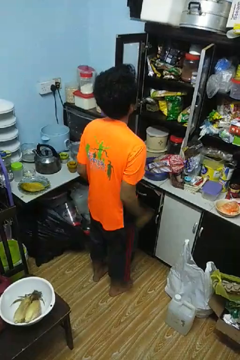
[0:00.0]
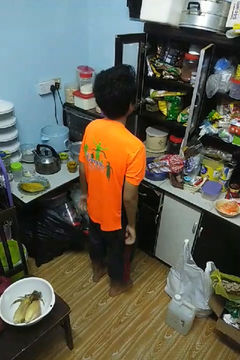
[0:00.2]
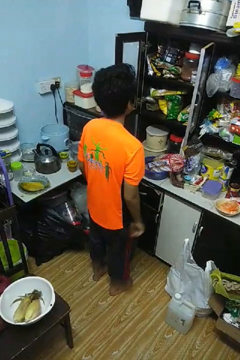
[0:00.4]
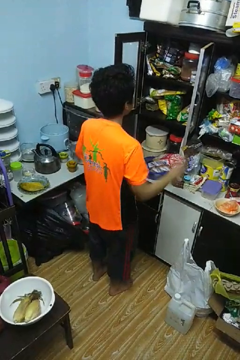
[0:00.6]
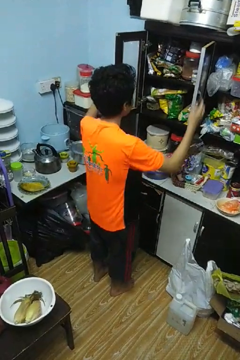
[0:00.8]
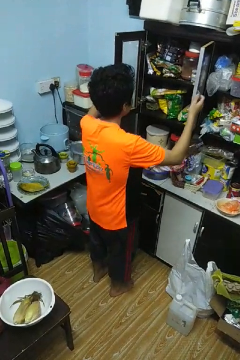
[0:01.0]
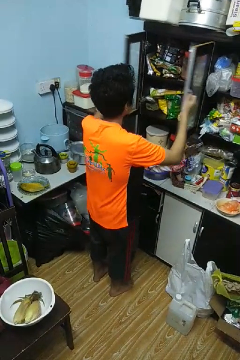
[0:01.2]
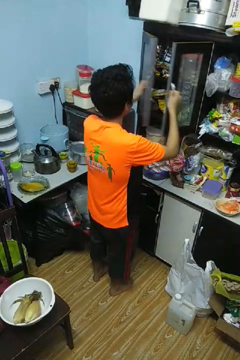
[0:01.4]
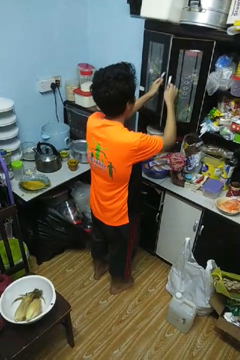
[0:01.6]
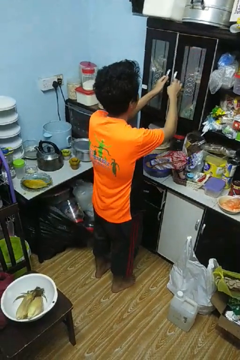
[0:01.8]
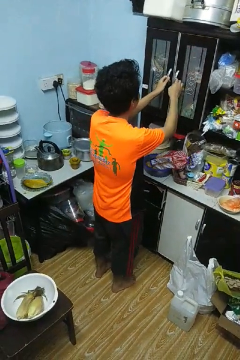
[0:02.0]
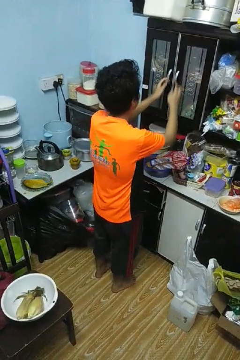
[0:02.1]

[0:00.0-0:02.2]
person closes cabinet

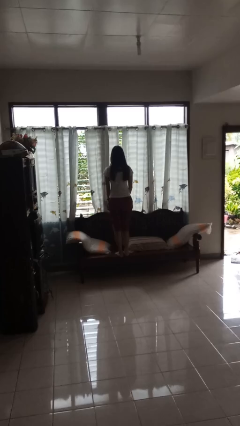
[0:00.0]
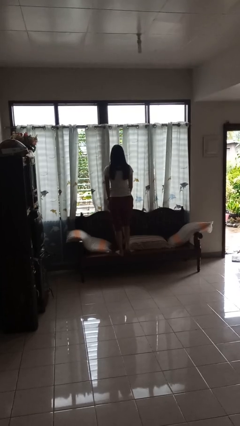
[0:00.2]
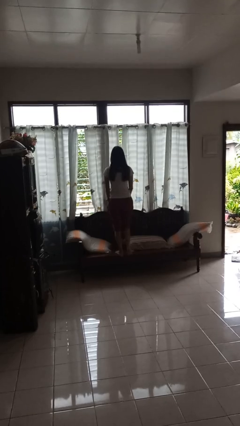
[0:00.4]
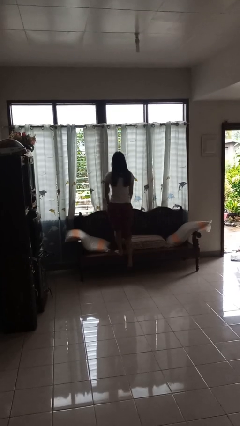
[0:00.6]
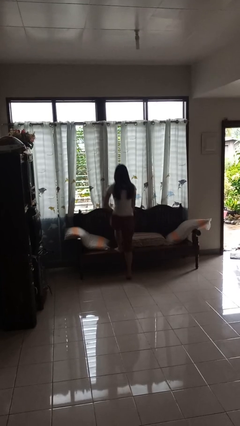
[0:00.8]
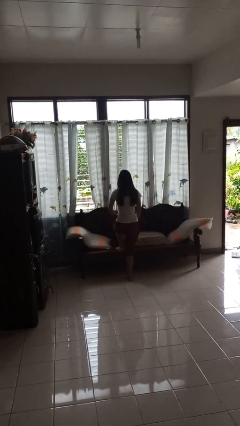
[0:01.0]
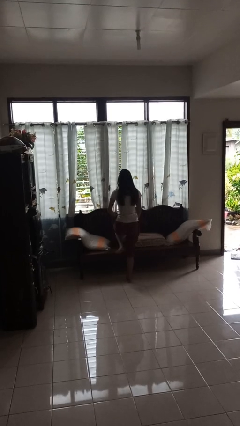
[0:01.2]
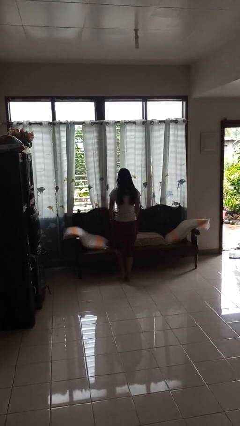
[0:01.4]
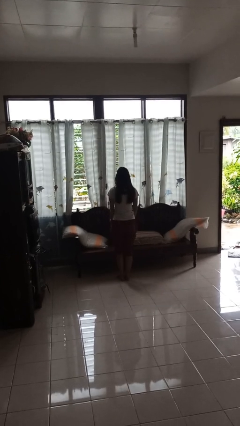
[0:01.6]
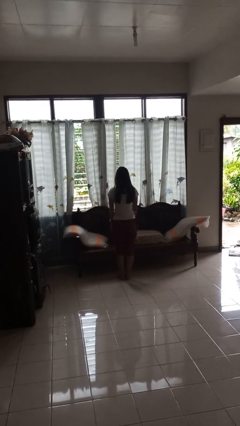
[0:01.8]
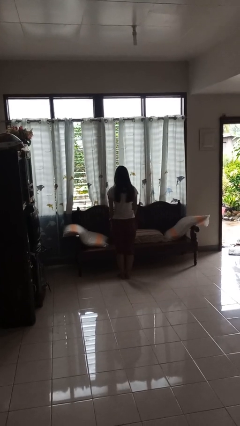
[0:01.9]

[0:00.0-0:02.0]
person climbs off couch

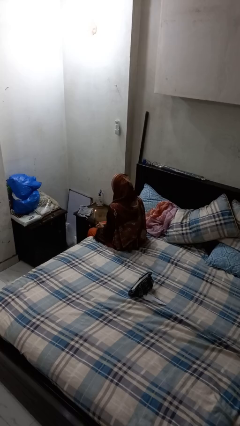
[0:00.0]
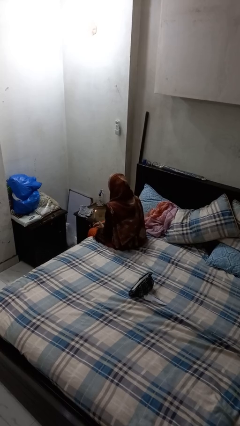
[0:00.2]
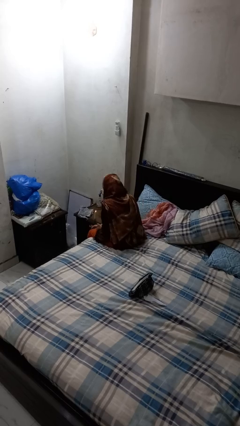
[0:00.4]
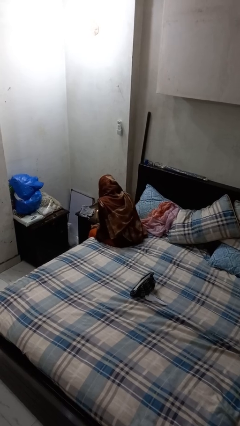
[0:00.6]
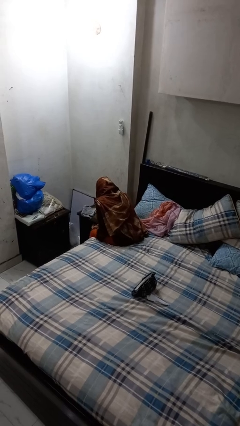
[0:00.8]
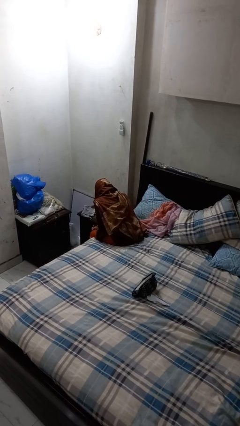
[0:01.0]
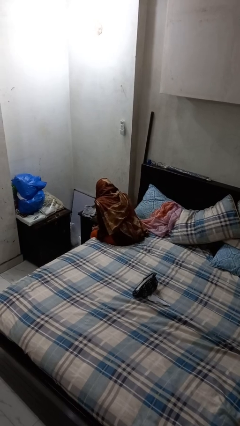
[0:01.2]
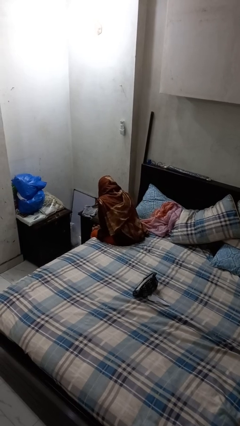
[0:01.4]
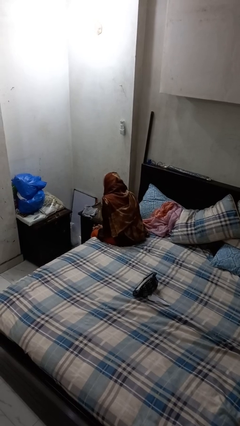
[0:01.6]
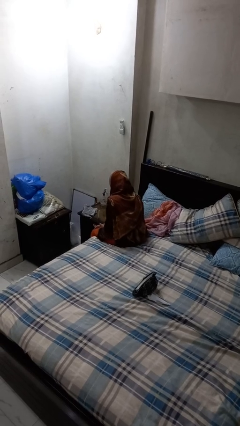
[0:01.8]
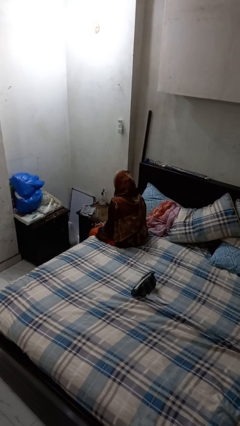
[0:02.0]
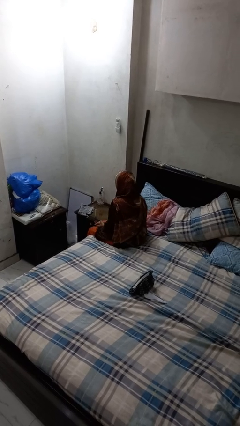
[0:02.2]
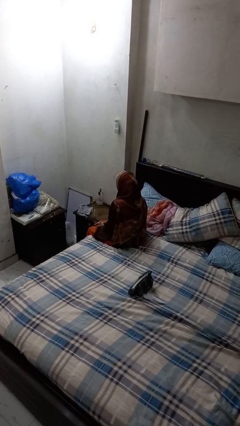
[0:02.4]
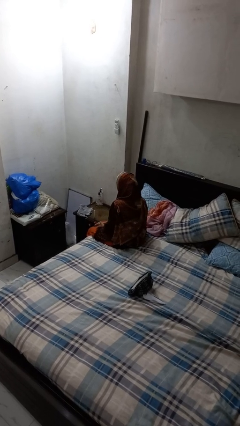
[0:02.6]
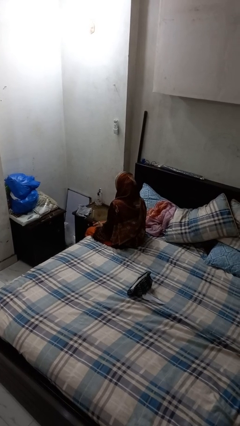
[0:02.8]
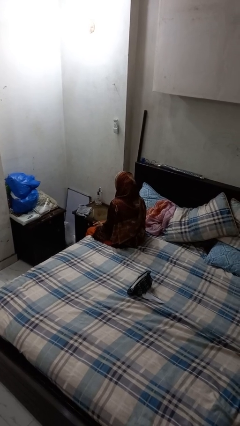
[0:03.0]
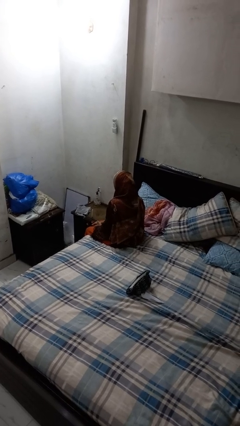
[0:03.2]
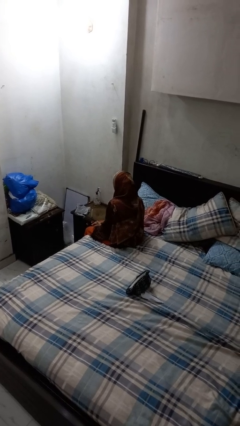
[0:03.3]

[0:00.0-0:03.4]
person extinguishes candle

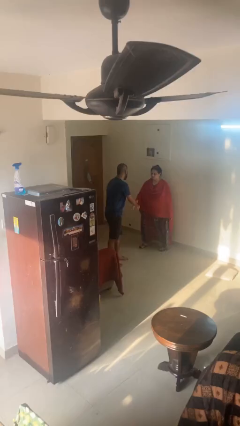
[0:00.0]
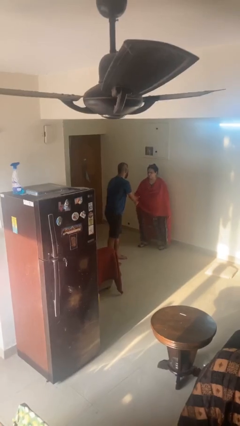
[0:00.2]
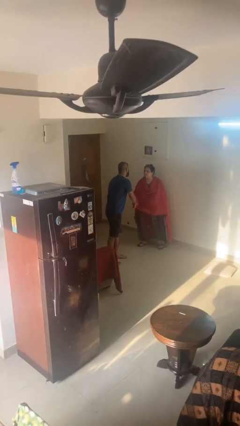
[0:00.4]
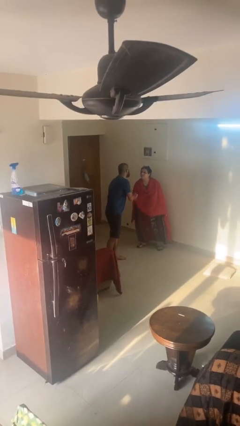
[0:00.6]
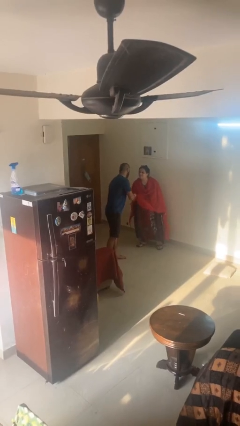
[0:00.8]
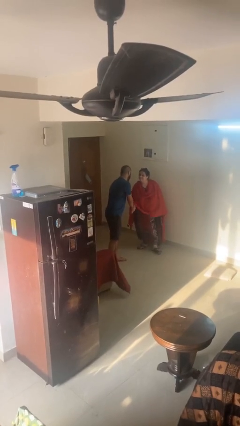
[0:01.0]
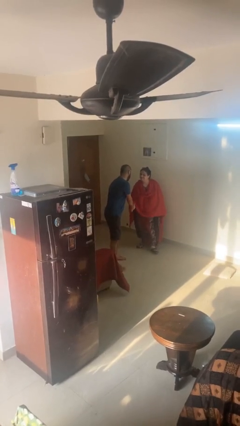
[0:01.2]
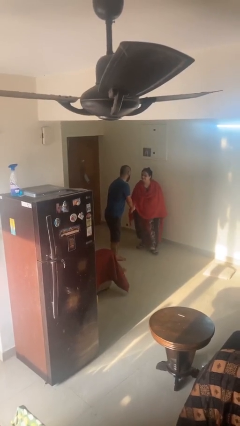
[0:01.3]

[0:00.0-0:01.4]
person shakes hand

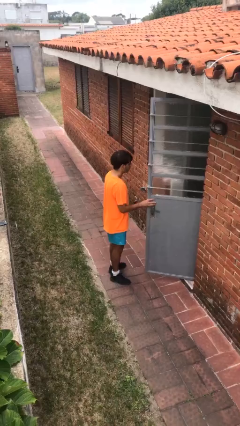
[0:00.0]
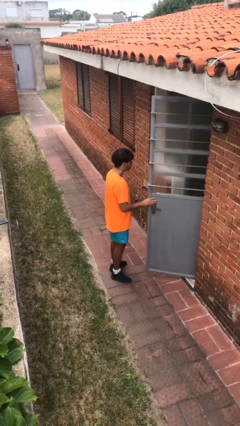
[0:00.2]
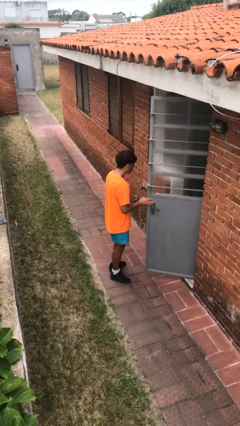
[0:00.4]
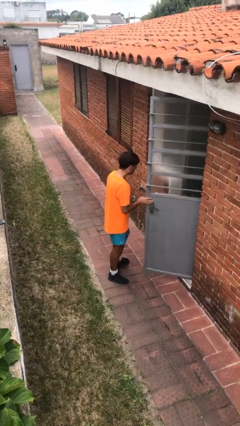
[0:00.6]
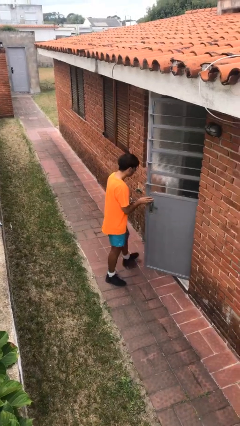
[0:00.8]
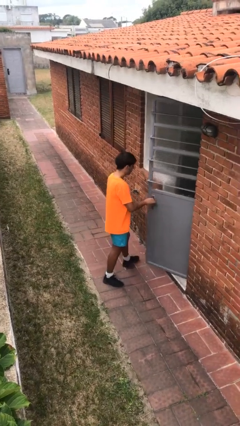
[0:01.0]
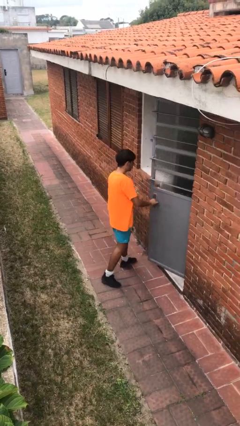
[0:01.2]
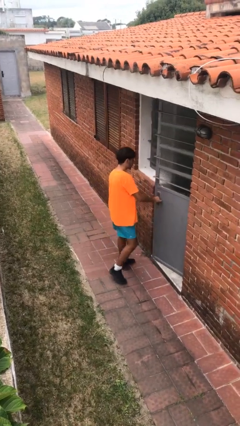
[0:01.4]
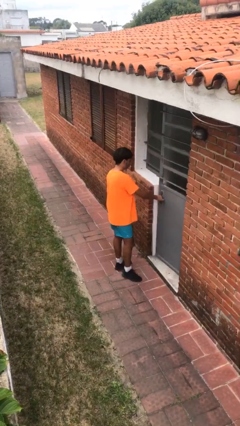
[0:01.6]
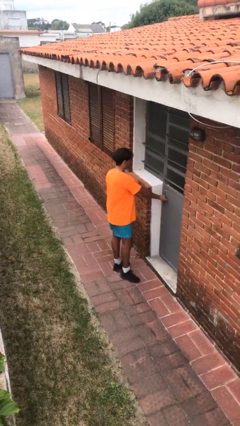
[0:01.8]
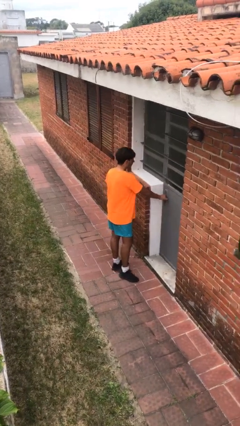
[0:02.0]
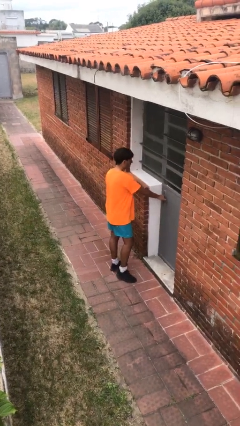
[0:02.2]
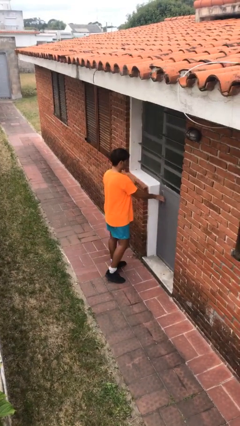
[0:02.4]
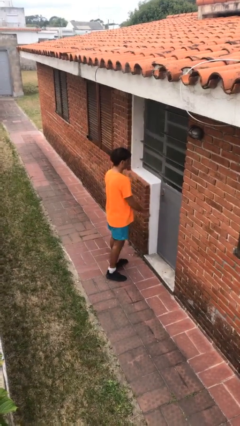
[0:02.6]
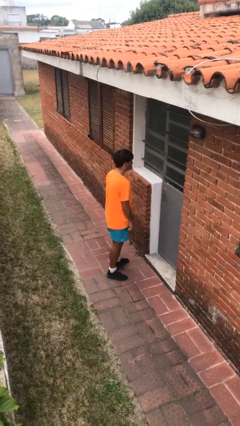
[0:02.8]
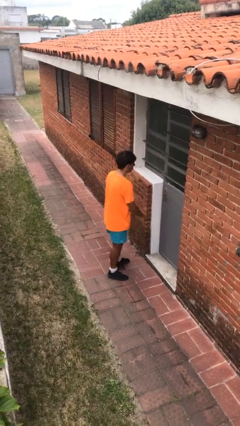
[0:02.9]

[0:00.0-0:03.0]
person closes facility door

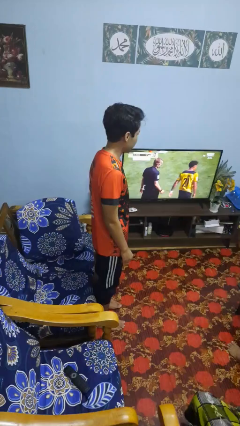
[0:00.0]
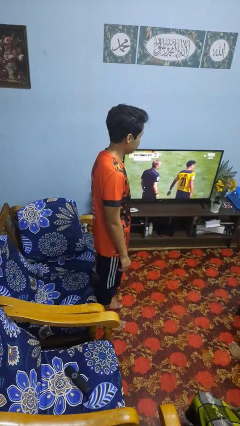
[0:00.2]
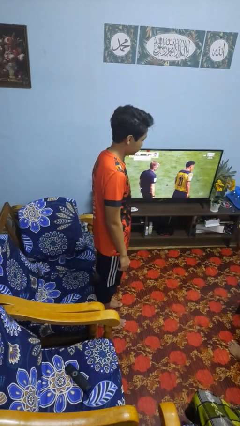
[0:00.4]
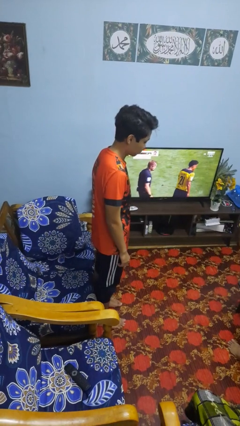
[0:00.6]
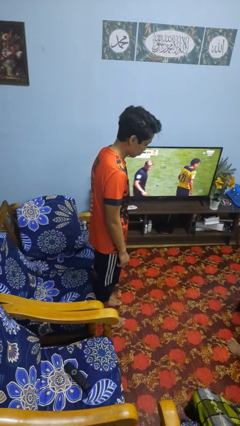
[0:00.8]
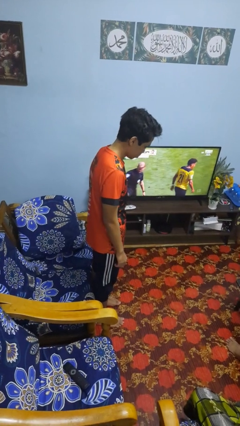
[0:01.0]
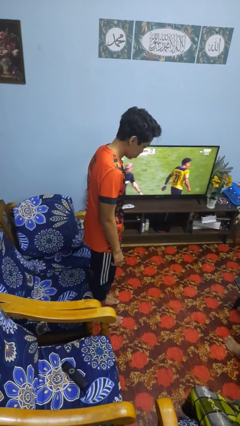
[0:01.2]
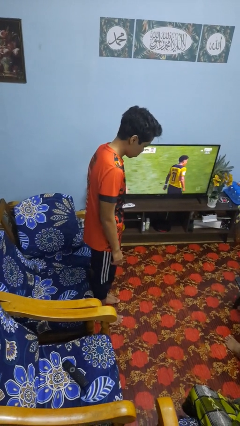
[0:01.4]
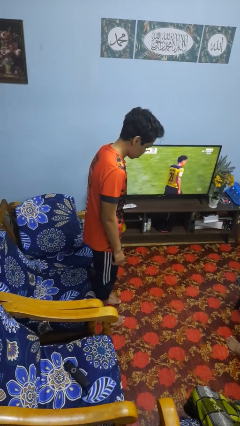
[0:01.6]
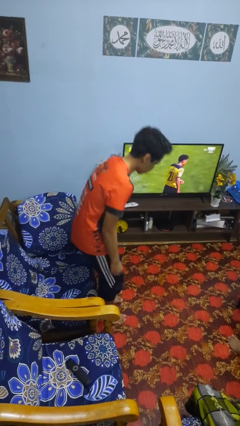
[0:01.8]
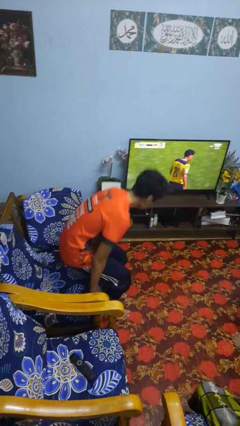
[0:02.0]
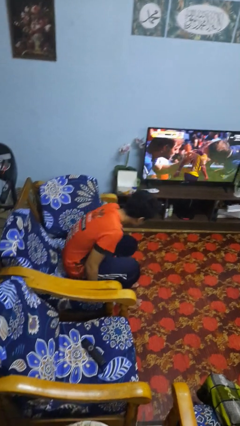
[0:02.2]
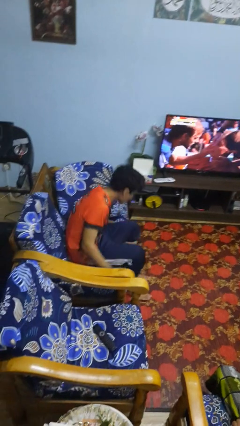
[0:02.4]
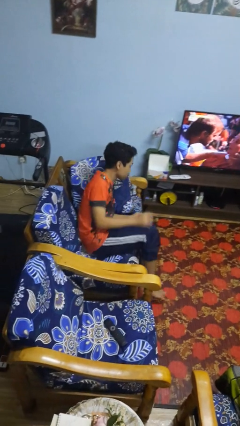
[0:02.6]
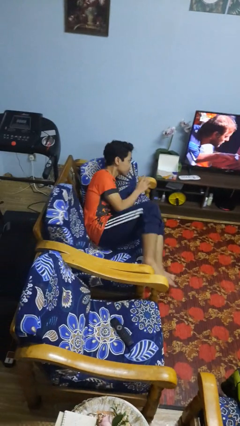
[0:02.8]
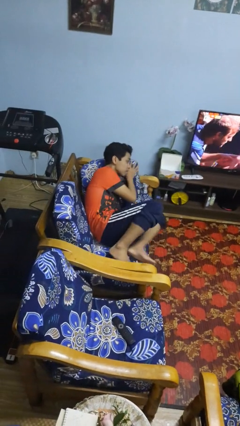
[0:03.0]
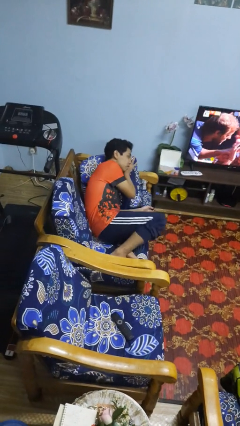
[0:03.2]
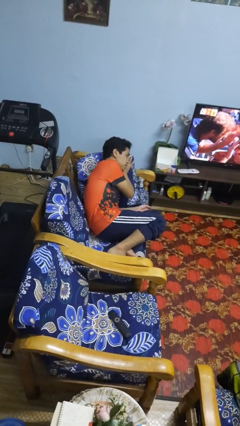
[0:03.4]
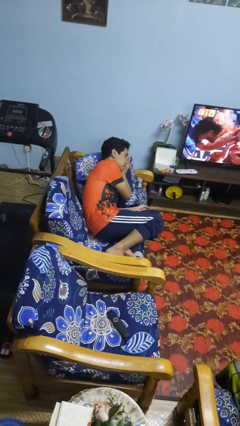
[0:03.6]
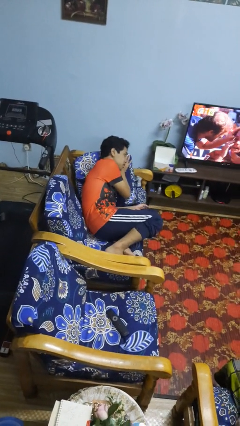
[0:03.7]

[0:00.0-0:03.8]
person lies down on couch

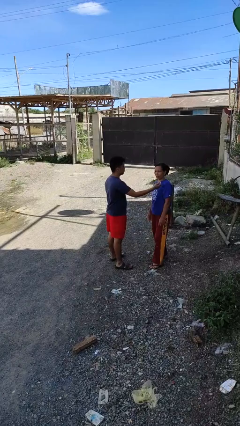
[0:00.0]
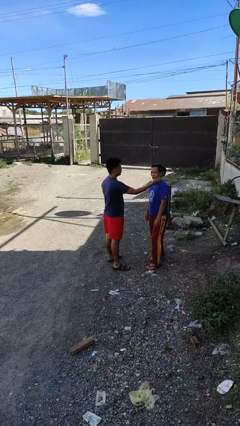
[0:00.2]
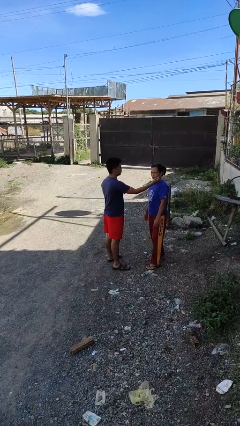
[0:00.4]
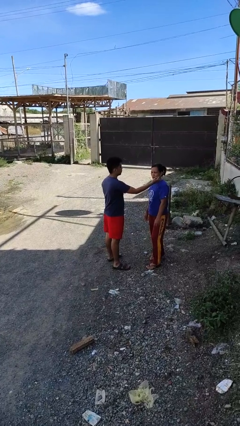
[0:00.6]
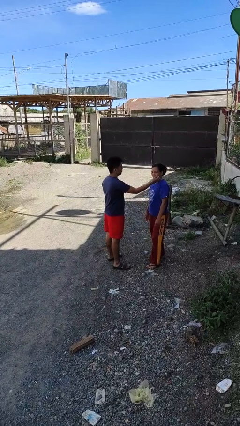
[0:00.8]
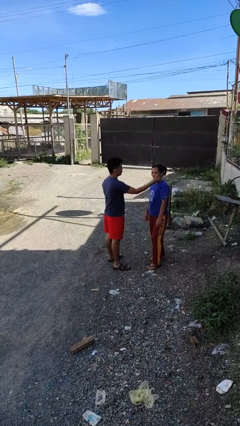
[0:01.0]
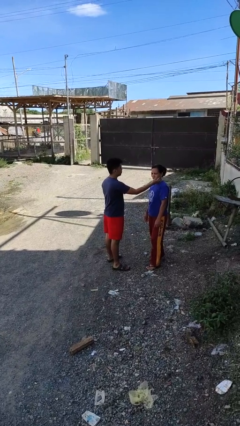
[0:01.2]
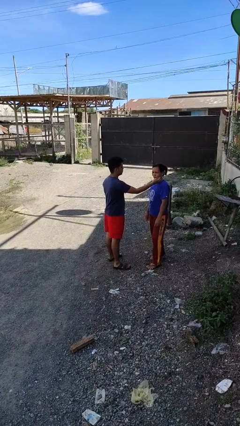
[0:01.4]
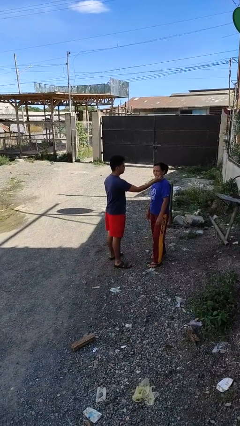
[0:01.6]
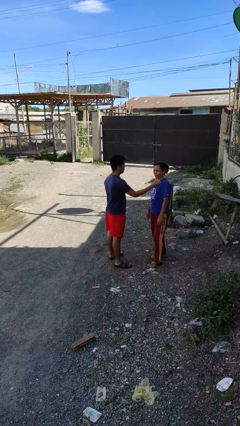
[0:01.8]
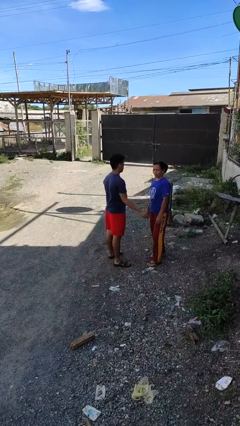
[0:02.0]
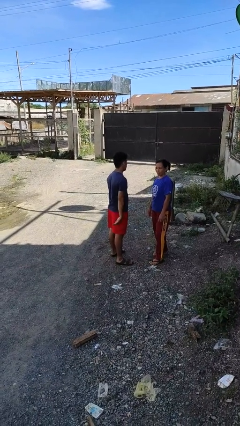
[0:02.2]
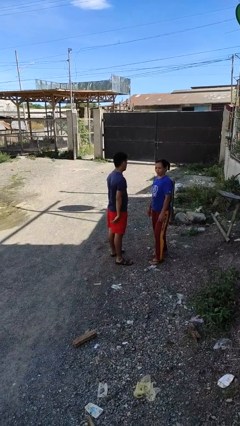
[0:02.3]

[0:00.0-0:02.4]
person touches face of person
